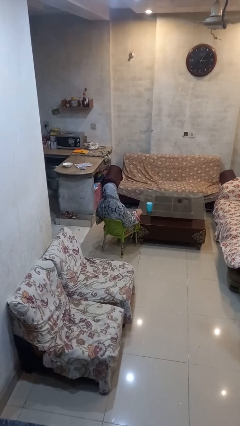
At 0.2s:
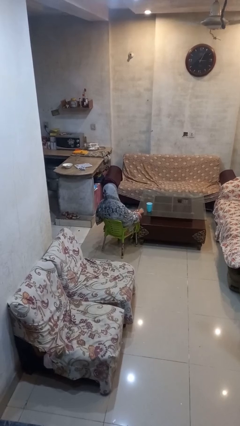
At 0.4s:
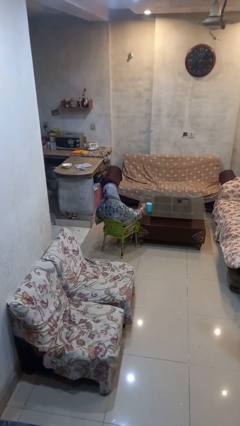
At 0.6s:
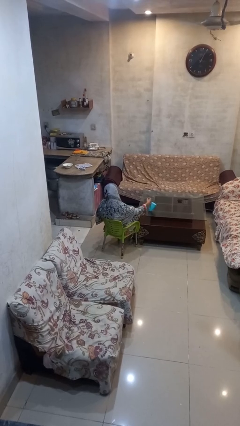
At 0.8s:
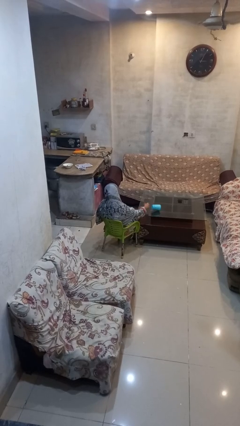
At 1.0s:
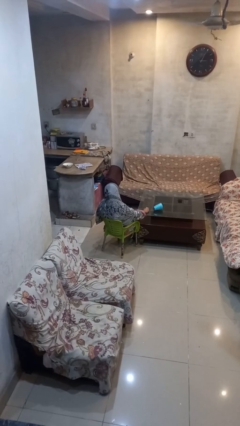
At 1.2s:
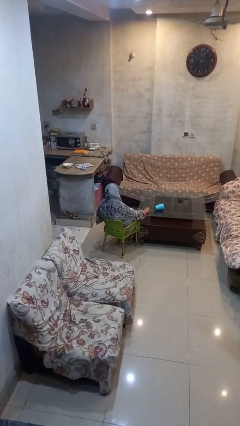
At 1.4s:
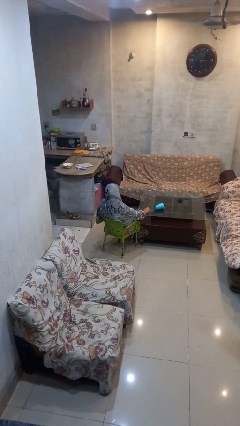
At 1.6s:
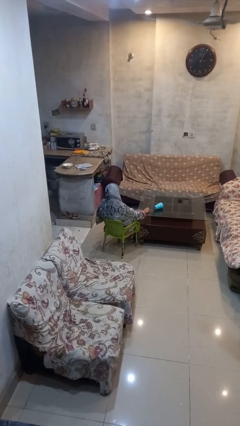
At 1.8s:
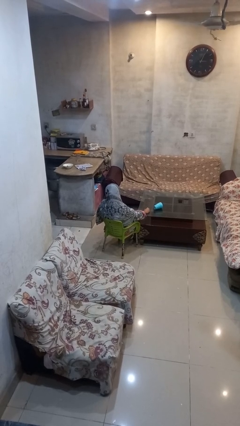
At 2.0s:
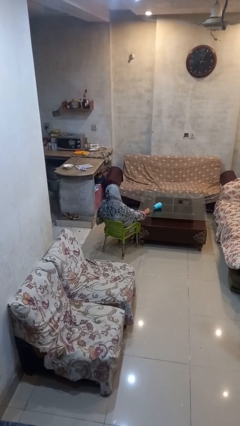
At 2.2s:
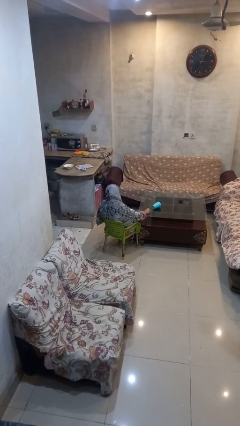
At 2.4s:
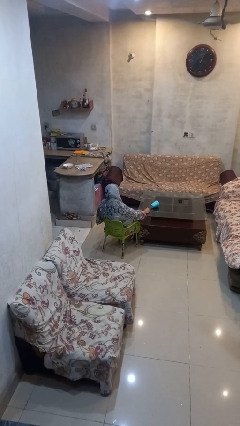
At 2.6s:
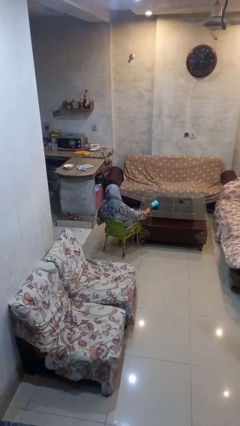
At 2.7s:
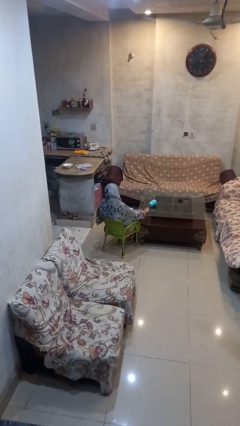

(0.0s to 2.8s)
person knocks over glass

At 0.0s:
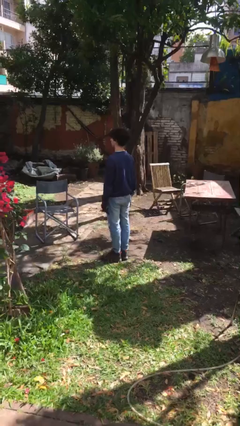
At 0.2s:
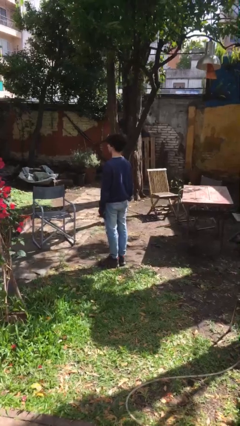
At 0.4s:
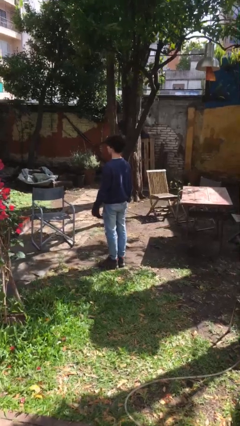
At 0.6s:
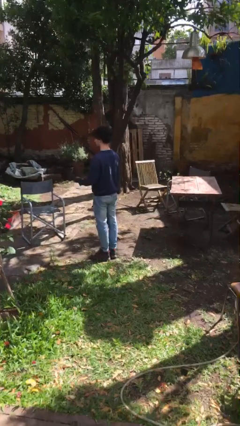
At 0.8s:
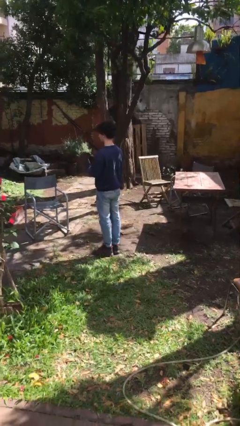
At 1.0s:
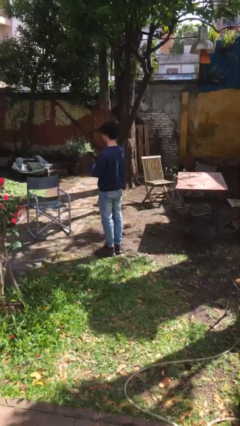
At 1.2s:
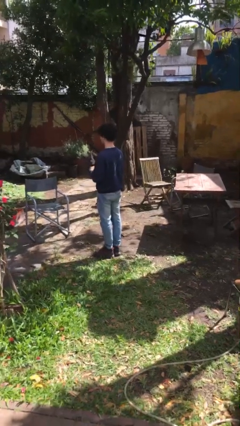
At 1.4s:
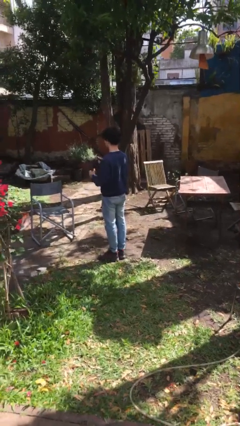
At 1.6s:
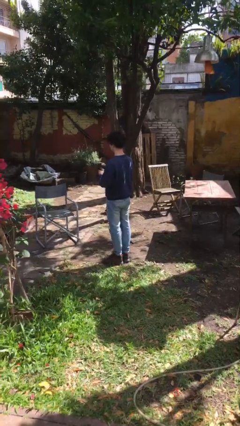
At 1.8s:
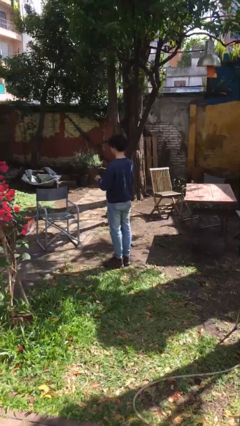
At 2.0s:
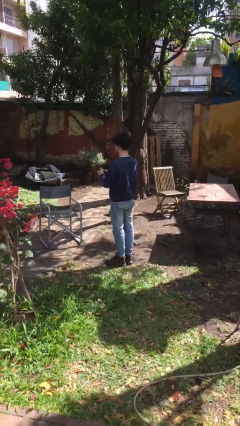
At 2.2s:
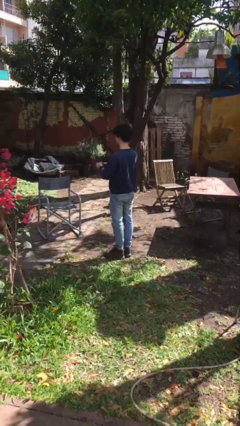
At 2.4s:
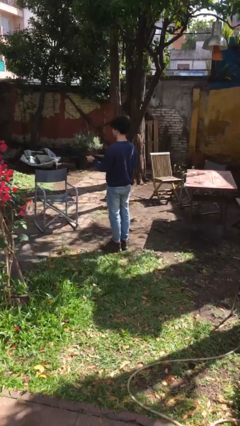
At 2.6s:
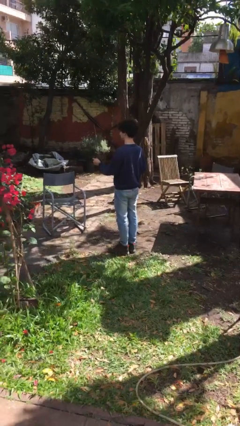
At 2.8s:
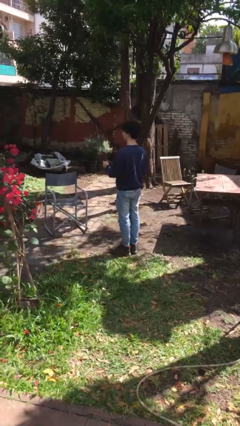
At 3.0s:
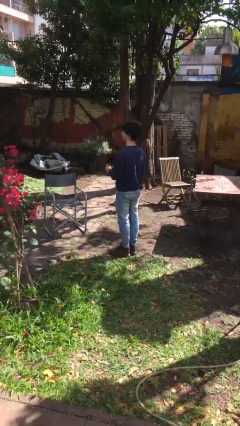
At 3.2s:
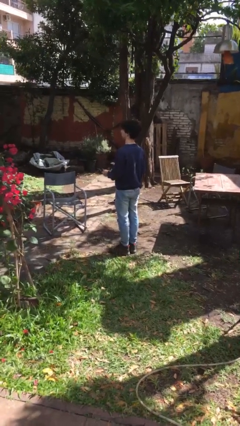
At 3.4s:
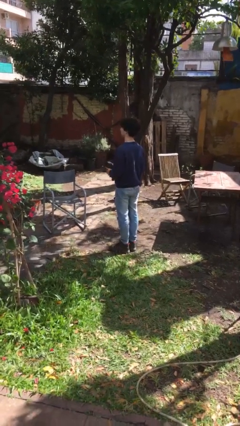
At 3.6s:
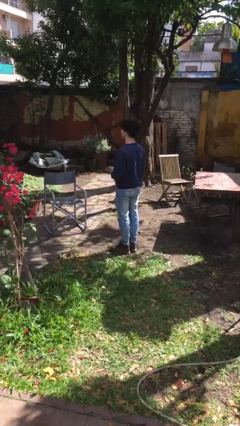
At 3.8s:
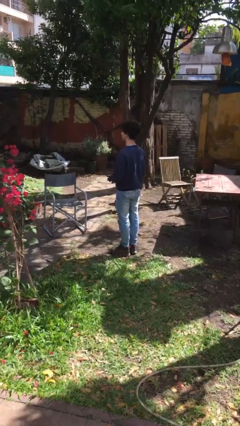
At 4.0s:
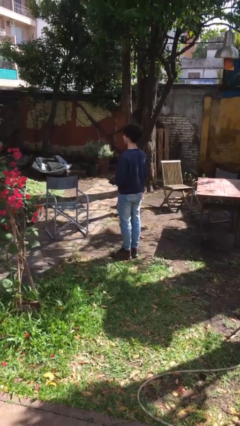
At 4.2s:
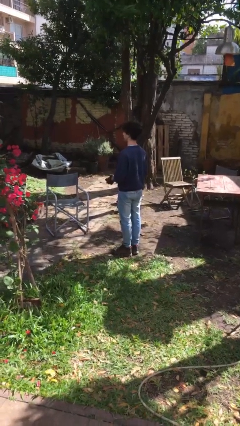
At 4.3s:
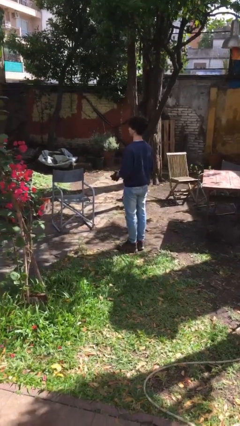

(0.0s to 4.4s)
person takes off gloves

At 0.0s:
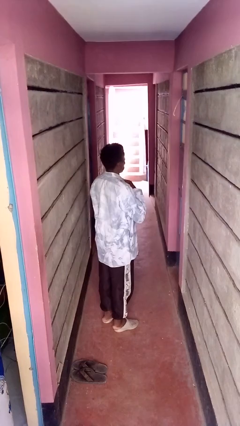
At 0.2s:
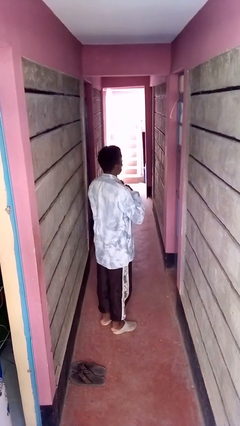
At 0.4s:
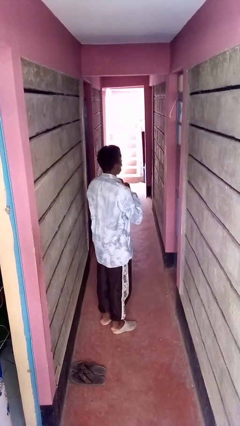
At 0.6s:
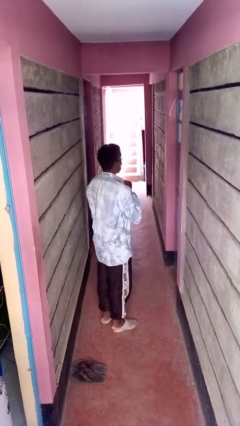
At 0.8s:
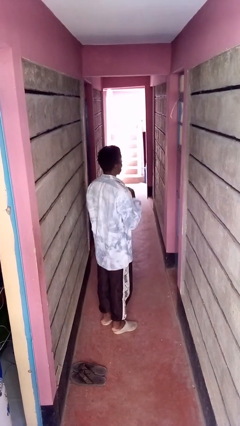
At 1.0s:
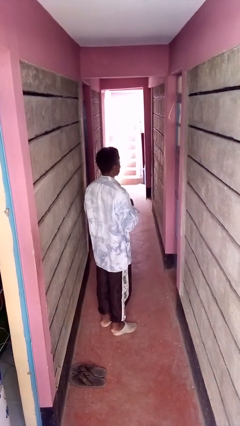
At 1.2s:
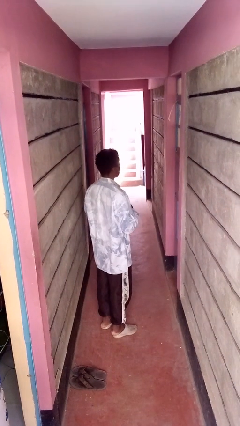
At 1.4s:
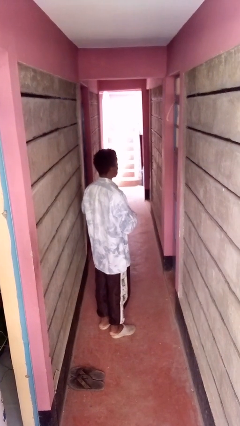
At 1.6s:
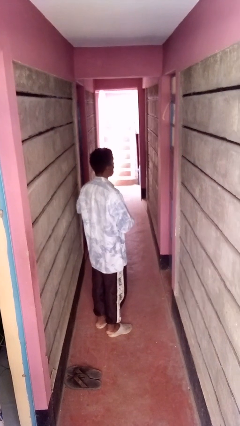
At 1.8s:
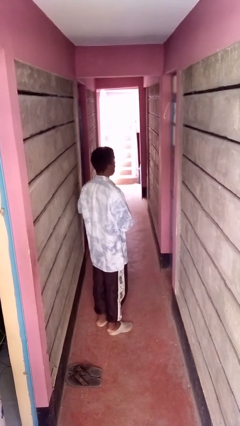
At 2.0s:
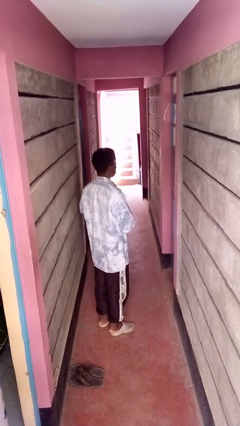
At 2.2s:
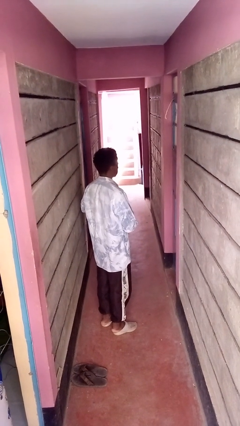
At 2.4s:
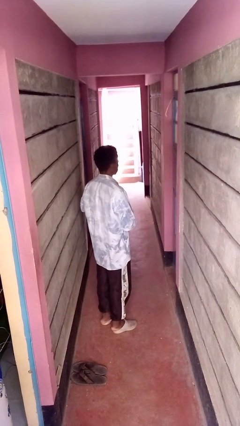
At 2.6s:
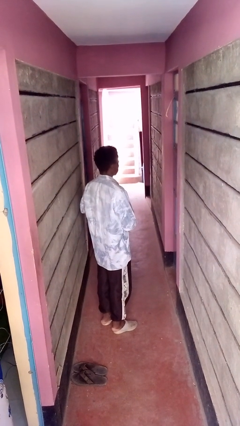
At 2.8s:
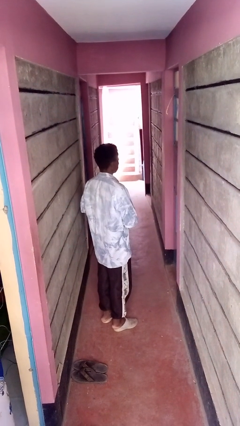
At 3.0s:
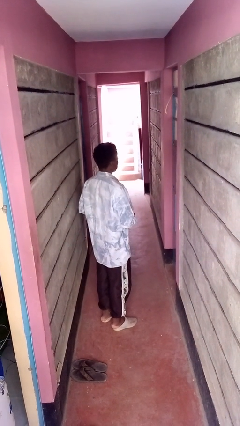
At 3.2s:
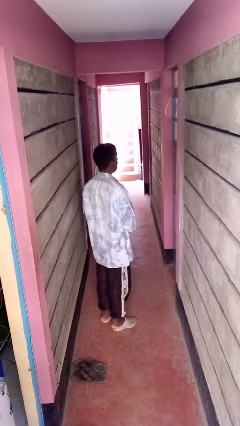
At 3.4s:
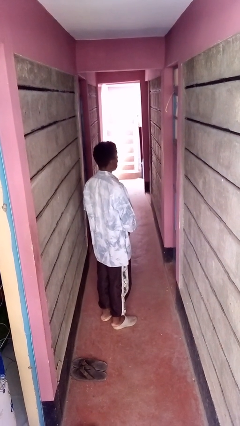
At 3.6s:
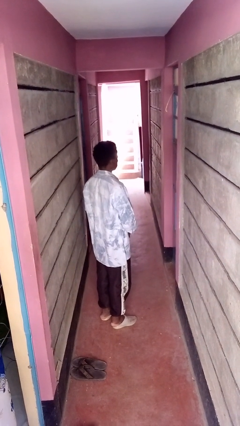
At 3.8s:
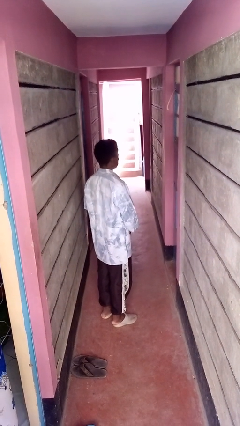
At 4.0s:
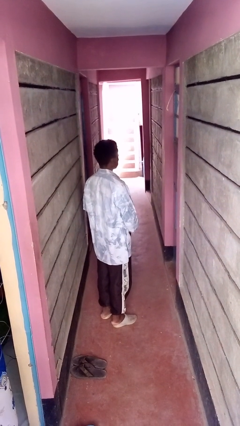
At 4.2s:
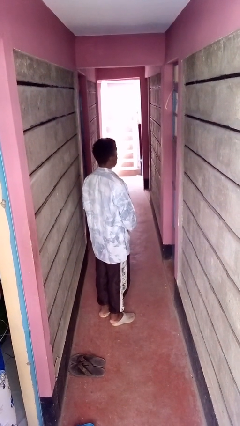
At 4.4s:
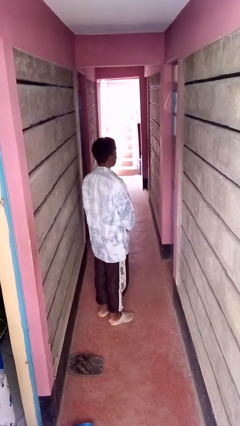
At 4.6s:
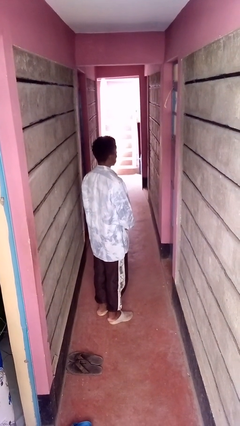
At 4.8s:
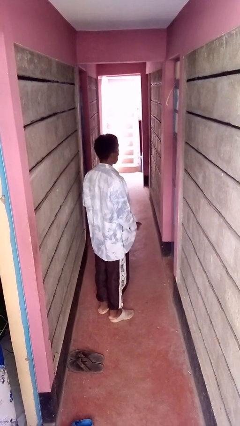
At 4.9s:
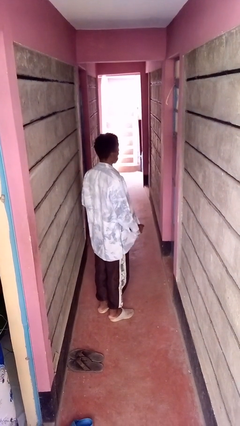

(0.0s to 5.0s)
person unbuttons shirt

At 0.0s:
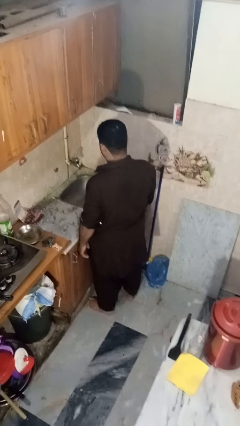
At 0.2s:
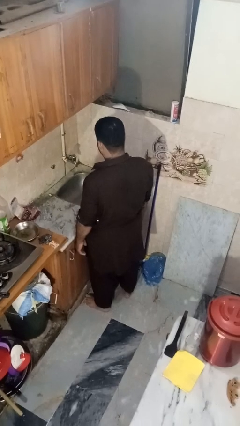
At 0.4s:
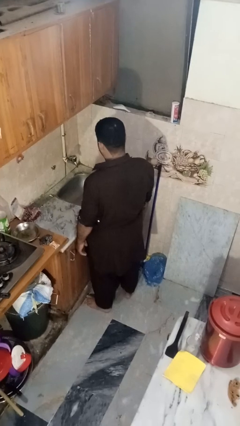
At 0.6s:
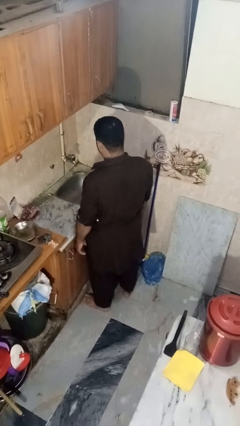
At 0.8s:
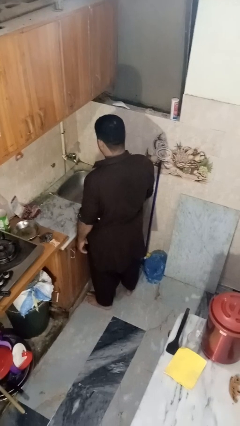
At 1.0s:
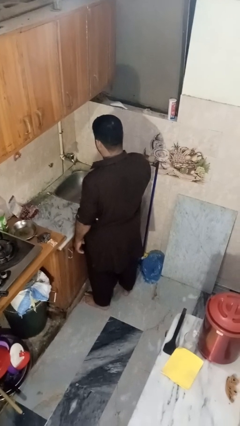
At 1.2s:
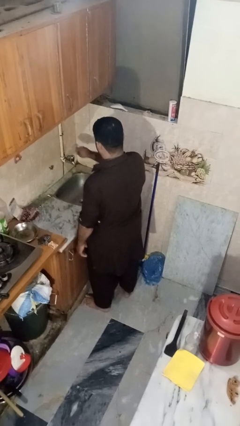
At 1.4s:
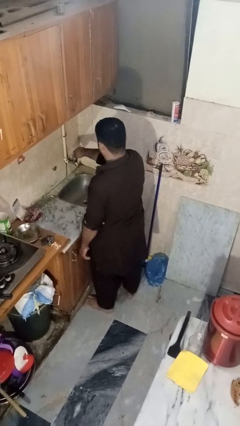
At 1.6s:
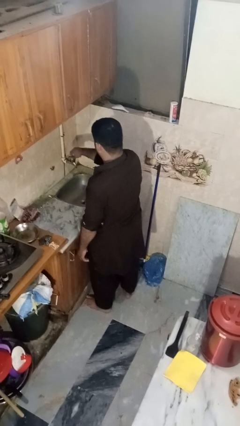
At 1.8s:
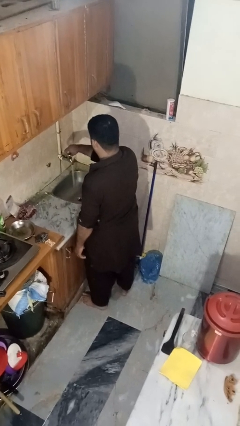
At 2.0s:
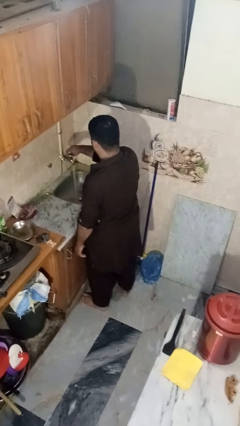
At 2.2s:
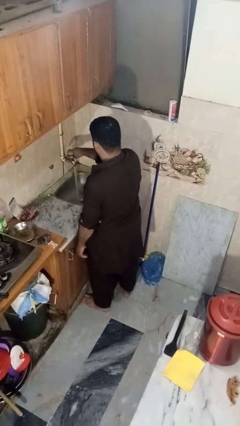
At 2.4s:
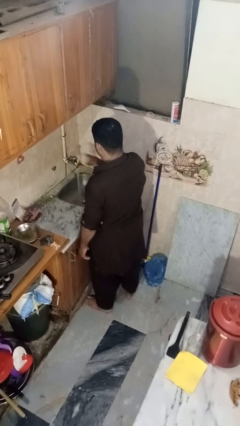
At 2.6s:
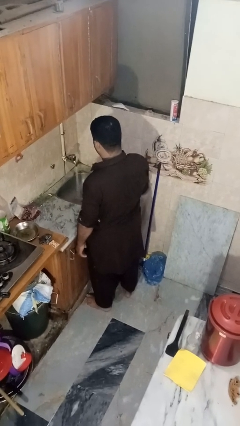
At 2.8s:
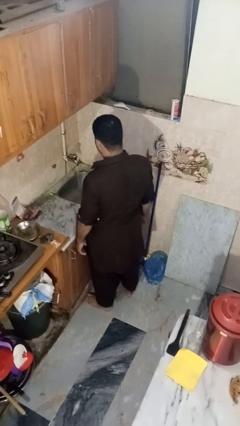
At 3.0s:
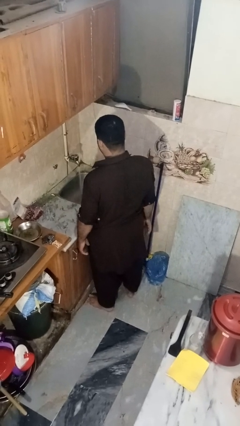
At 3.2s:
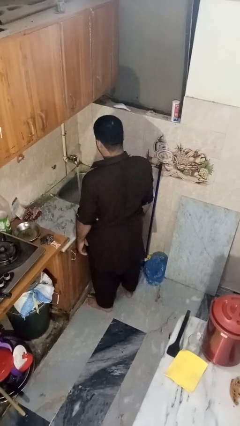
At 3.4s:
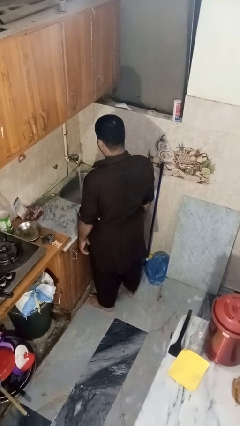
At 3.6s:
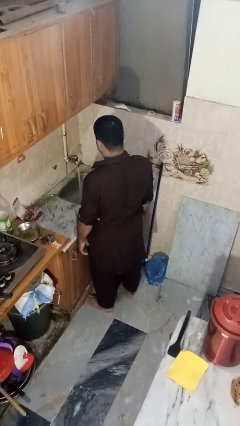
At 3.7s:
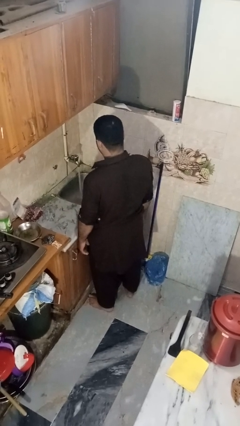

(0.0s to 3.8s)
person turns on faucet

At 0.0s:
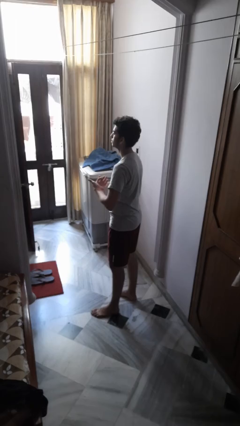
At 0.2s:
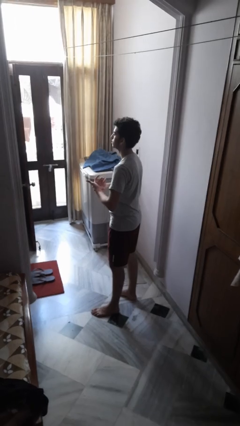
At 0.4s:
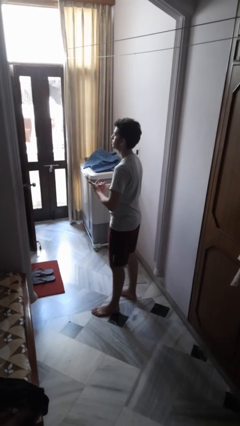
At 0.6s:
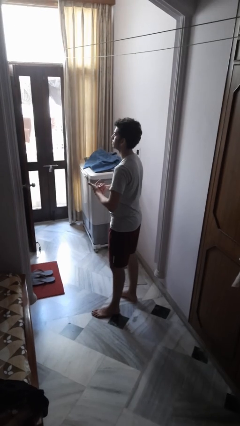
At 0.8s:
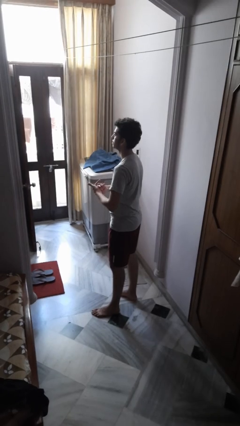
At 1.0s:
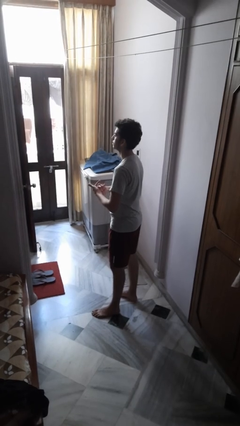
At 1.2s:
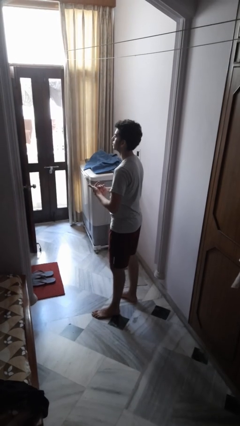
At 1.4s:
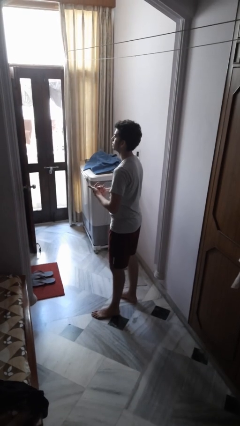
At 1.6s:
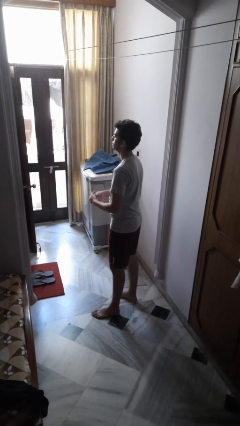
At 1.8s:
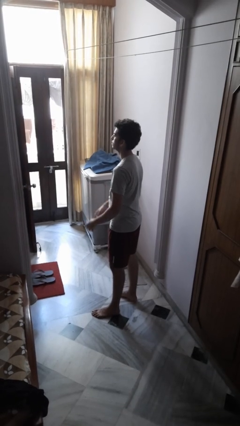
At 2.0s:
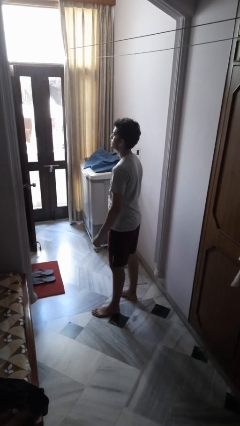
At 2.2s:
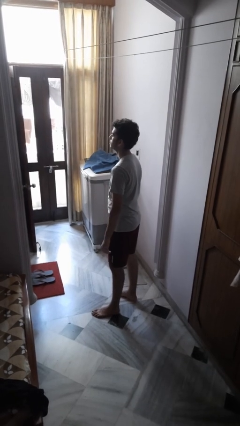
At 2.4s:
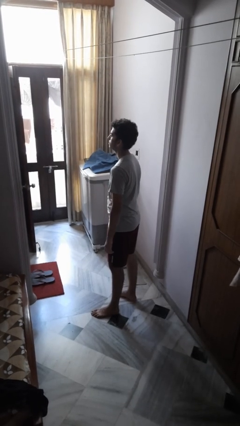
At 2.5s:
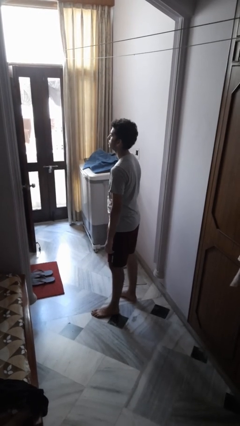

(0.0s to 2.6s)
person cracks knuckles
